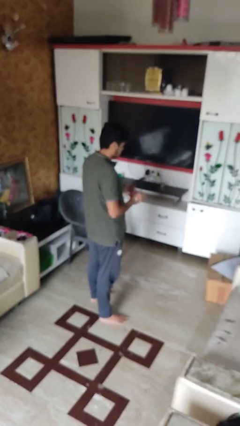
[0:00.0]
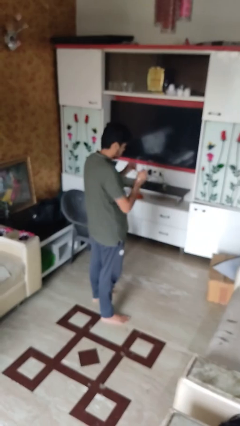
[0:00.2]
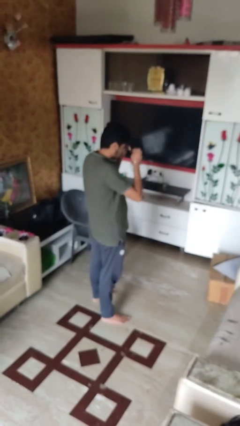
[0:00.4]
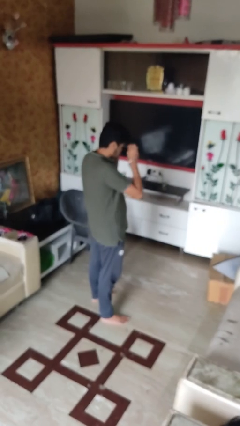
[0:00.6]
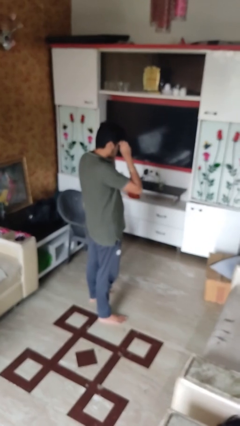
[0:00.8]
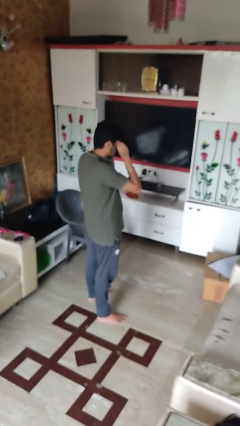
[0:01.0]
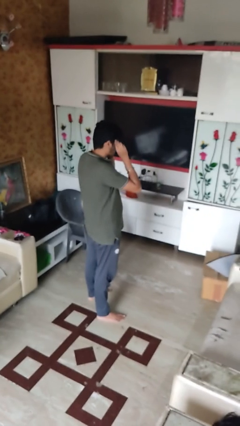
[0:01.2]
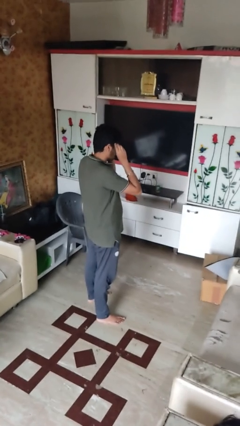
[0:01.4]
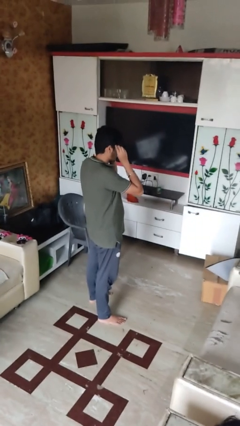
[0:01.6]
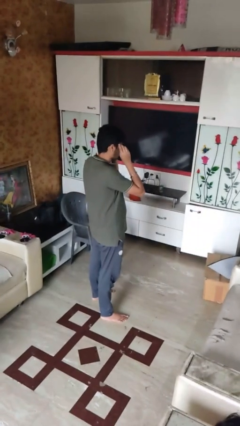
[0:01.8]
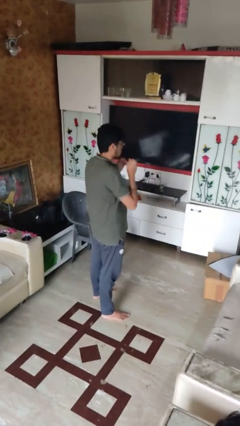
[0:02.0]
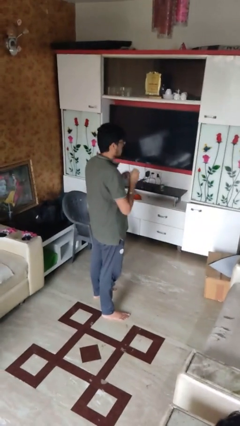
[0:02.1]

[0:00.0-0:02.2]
person puts on glasses

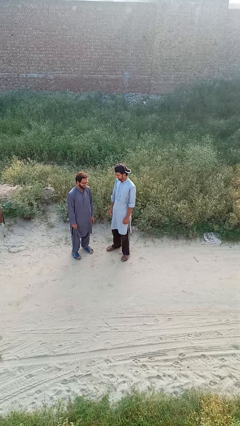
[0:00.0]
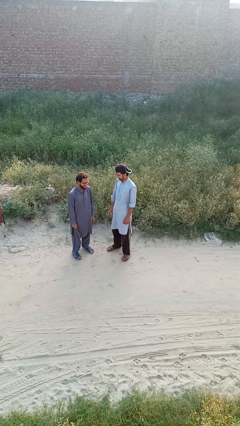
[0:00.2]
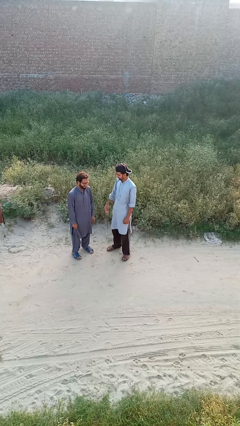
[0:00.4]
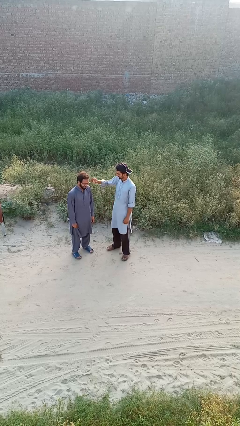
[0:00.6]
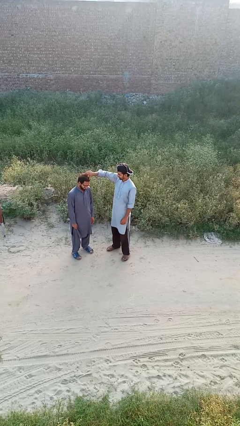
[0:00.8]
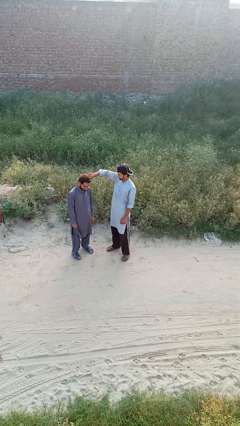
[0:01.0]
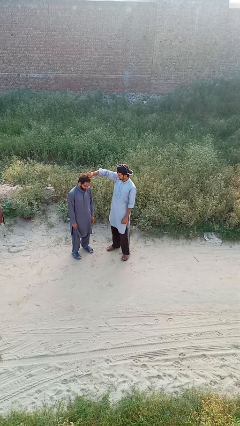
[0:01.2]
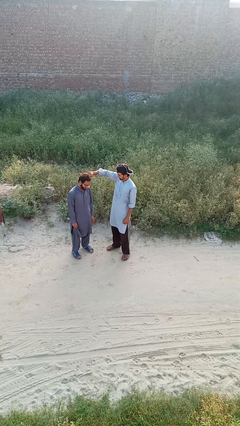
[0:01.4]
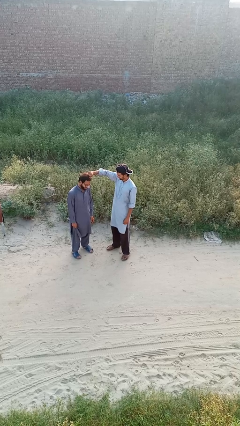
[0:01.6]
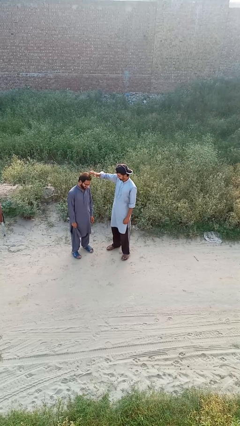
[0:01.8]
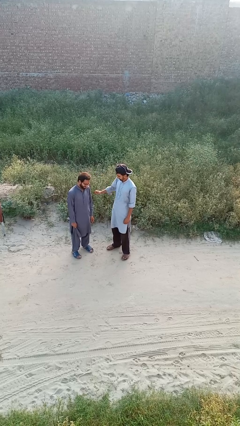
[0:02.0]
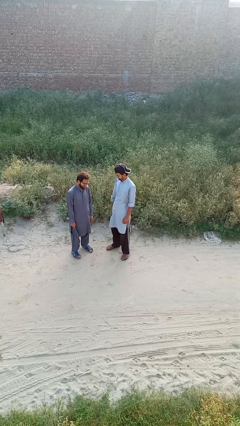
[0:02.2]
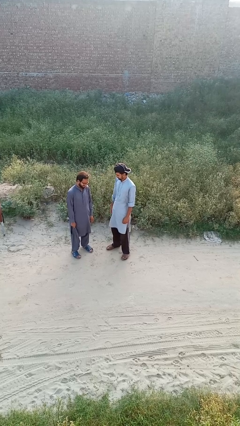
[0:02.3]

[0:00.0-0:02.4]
person grabs person by hair

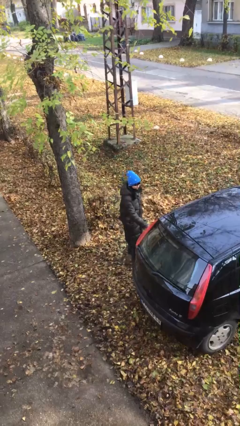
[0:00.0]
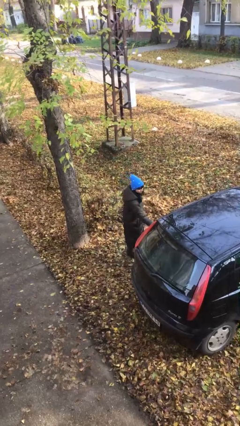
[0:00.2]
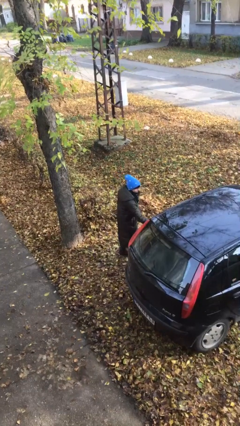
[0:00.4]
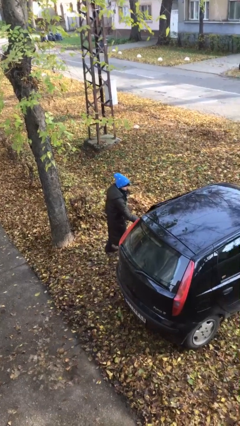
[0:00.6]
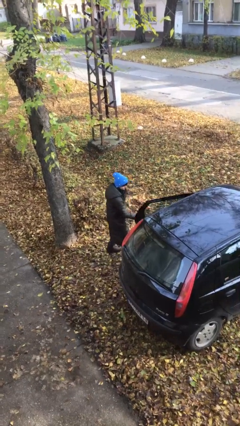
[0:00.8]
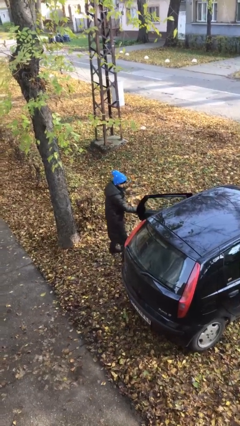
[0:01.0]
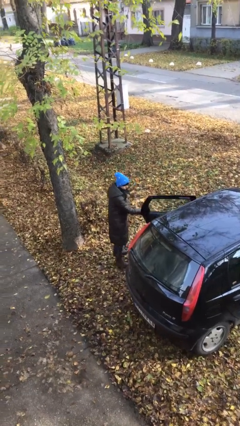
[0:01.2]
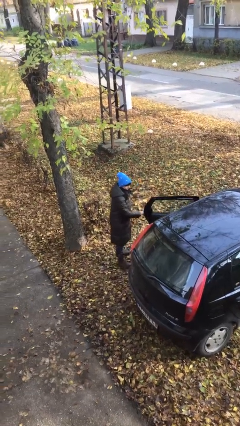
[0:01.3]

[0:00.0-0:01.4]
person opens car door

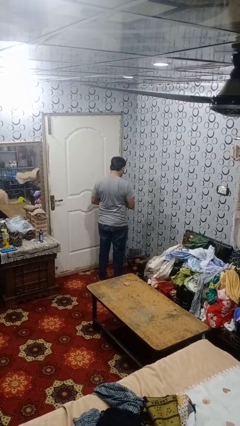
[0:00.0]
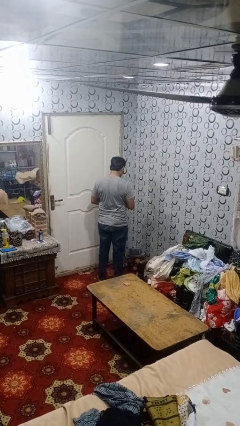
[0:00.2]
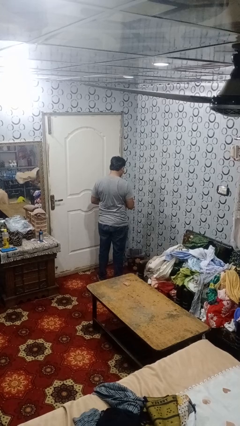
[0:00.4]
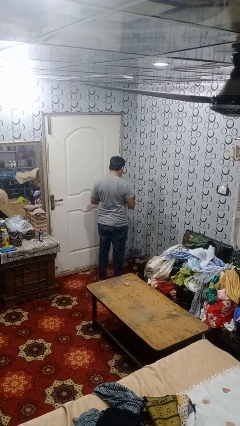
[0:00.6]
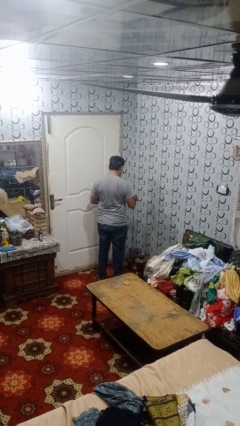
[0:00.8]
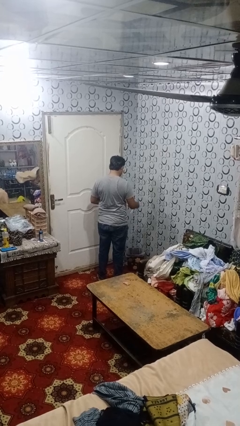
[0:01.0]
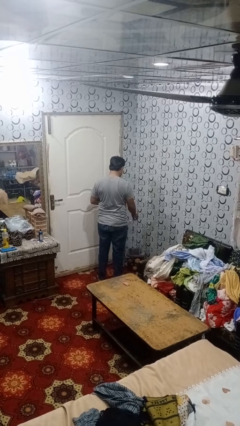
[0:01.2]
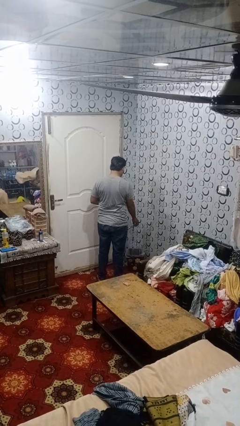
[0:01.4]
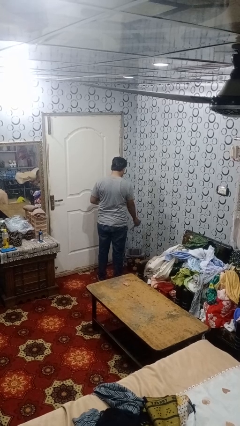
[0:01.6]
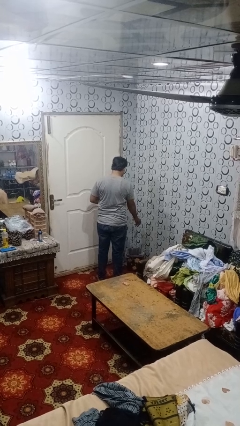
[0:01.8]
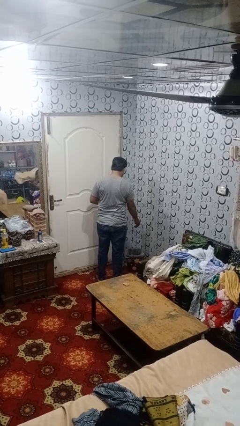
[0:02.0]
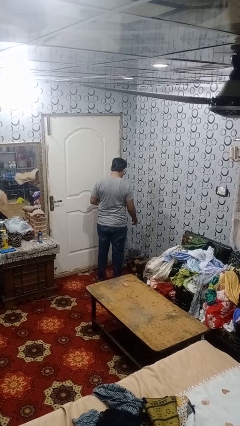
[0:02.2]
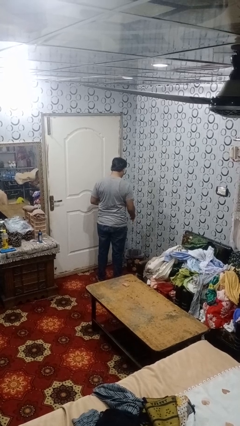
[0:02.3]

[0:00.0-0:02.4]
person discards trash

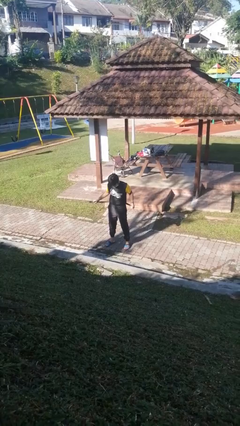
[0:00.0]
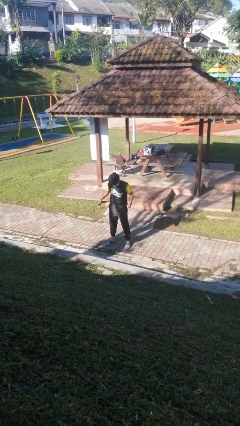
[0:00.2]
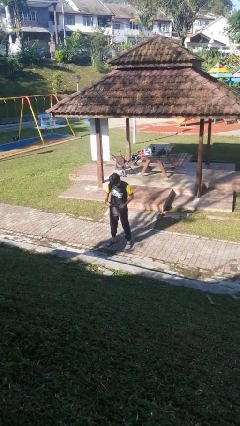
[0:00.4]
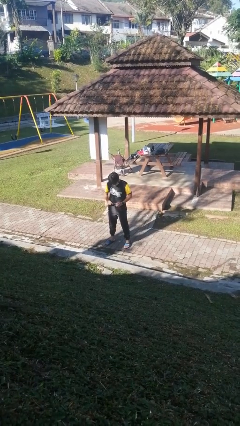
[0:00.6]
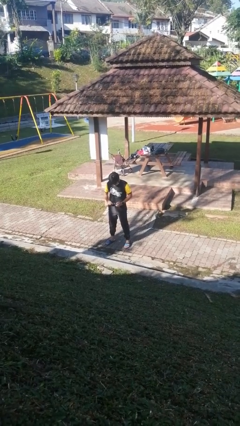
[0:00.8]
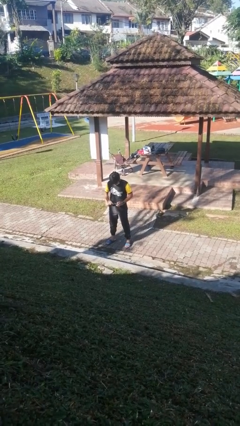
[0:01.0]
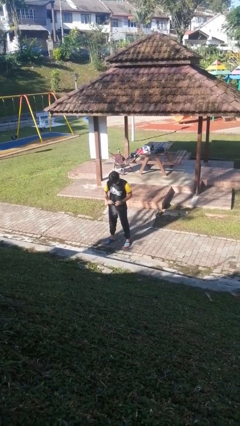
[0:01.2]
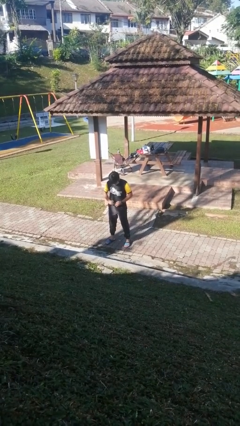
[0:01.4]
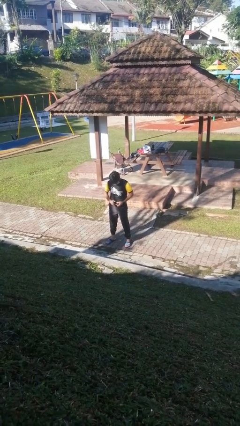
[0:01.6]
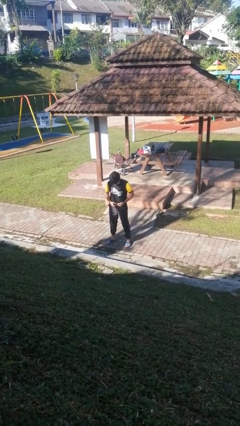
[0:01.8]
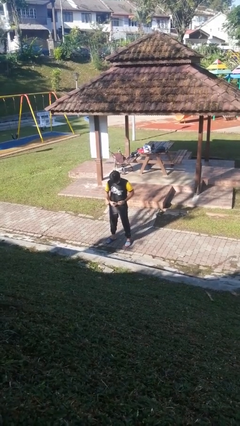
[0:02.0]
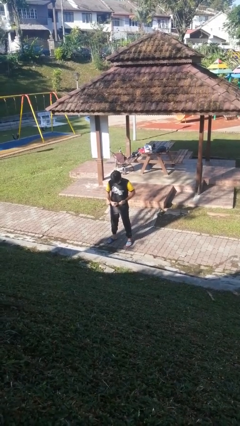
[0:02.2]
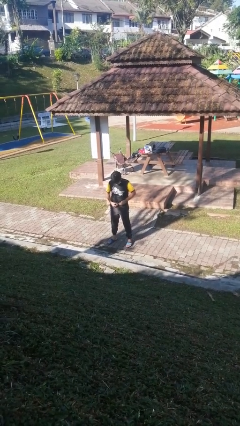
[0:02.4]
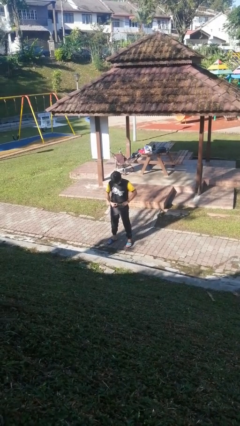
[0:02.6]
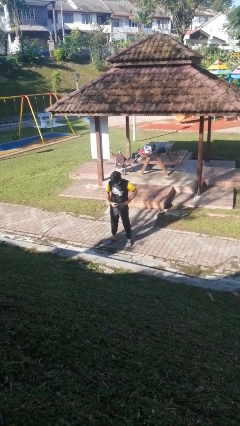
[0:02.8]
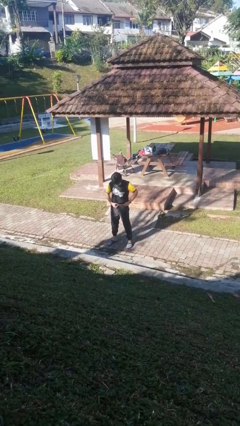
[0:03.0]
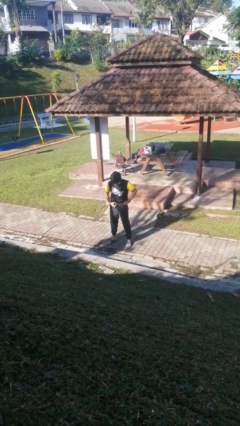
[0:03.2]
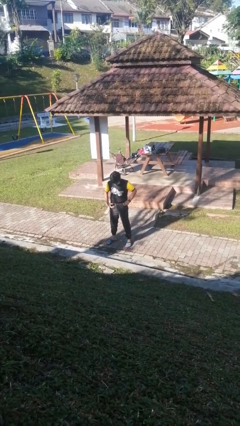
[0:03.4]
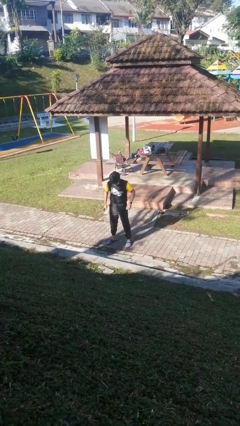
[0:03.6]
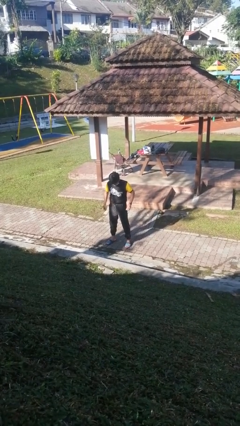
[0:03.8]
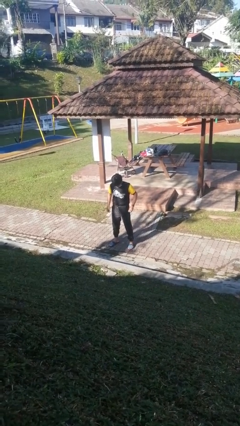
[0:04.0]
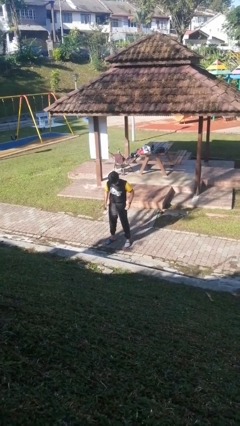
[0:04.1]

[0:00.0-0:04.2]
person puts on belt

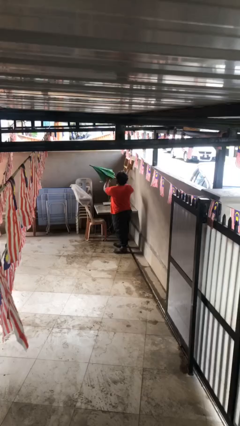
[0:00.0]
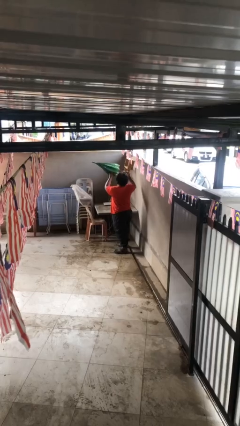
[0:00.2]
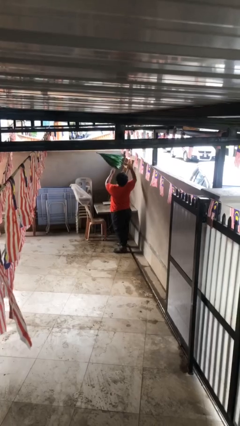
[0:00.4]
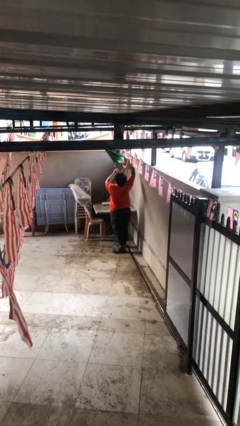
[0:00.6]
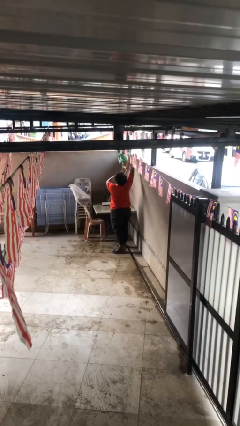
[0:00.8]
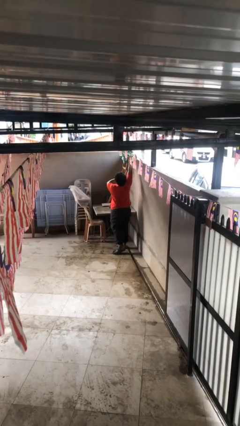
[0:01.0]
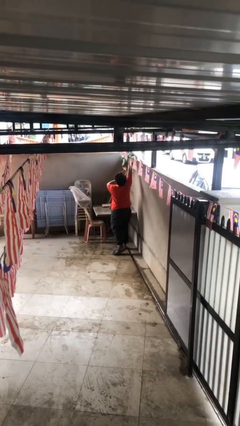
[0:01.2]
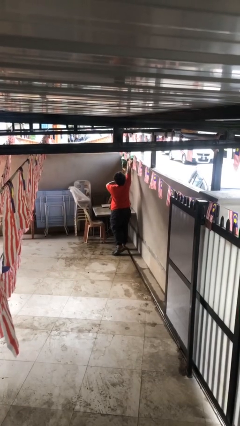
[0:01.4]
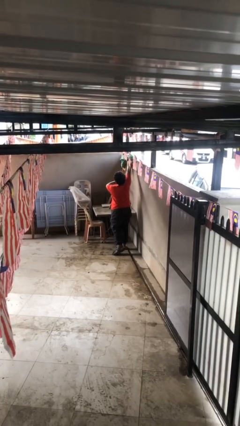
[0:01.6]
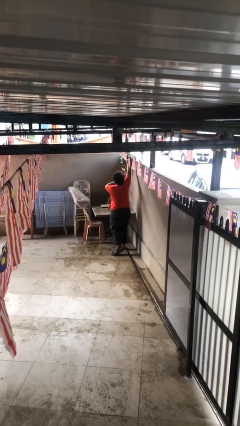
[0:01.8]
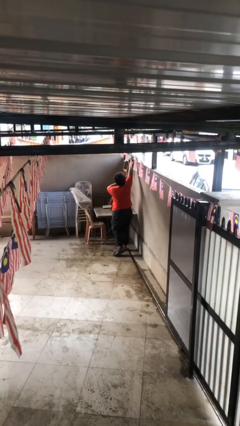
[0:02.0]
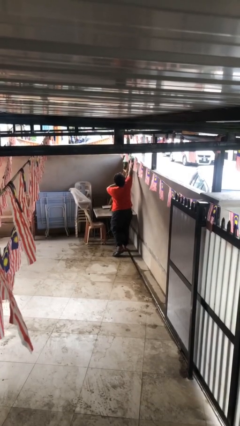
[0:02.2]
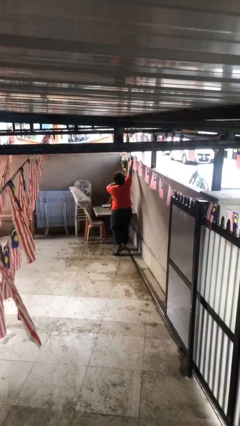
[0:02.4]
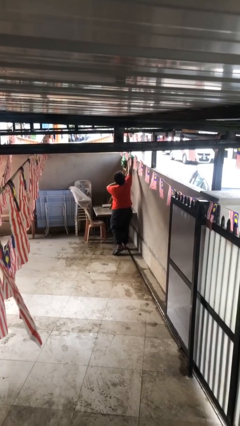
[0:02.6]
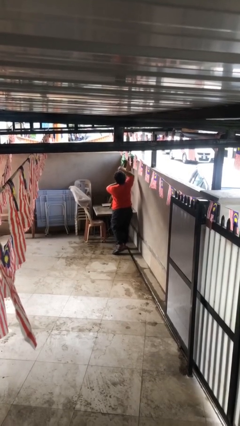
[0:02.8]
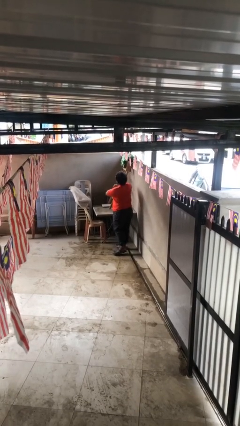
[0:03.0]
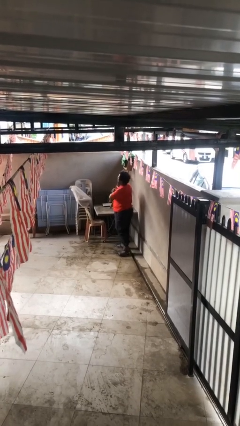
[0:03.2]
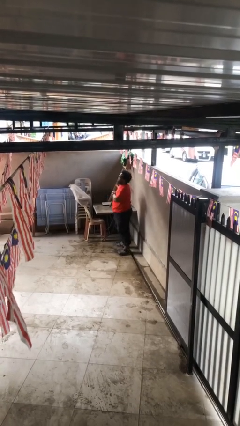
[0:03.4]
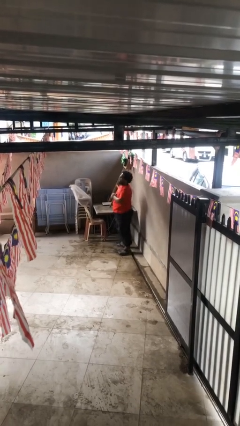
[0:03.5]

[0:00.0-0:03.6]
person puts down object on shelf

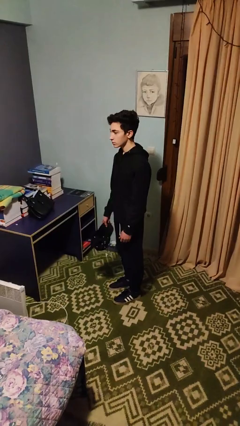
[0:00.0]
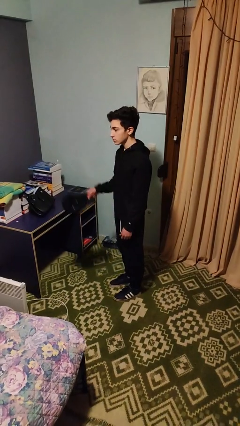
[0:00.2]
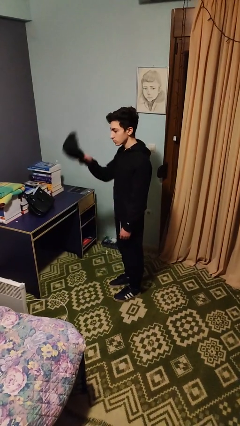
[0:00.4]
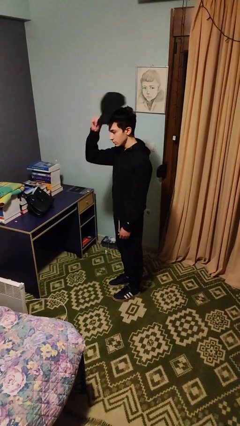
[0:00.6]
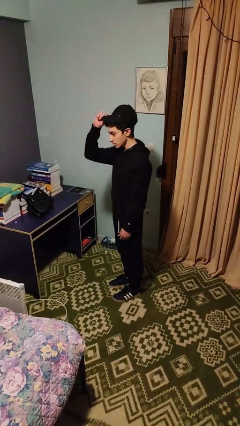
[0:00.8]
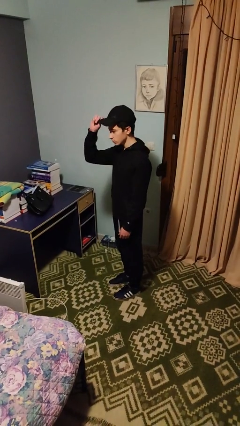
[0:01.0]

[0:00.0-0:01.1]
person puts on hat
